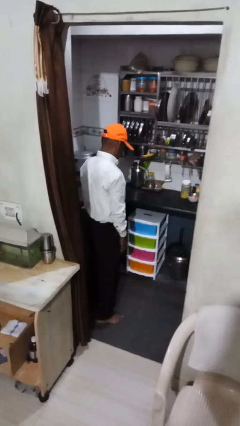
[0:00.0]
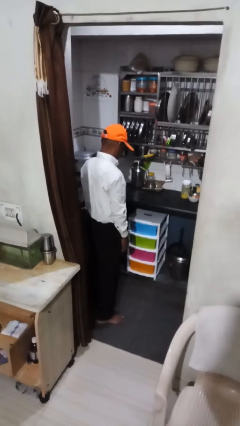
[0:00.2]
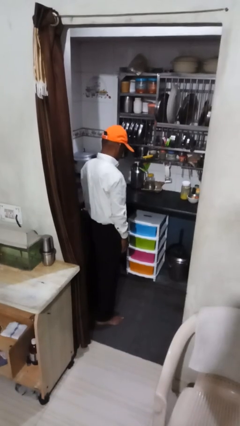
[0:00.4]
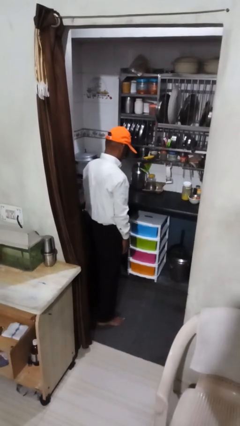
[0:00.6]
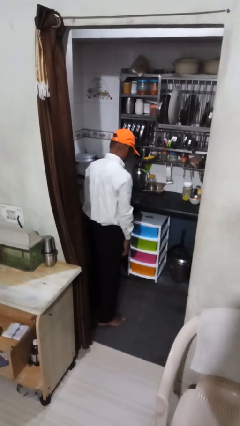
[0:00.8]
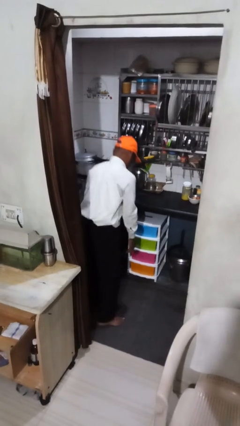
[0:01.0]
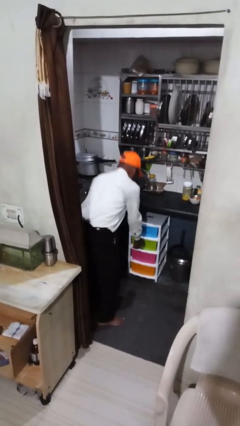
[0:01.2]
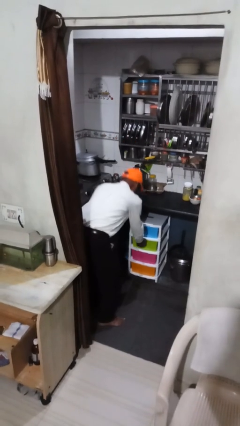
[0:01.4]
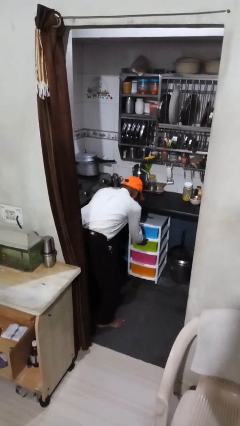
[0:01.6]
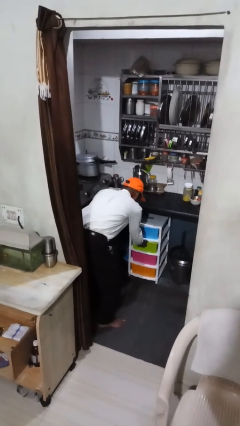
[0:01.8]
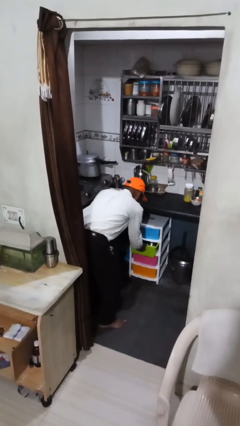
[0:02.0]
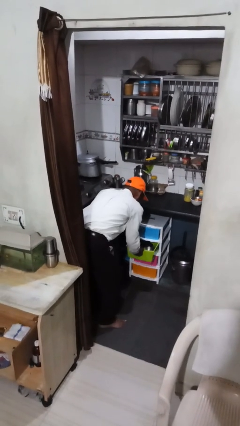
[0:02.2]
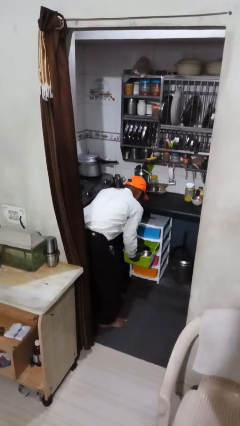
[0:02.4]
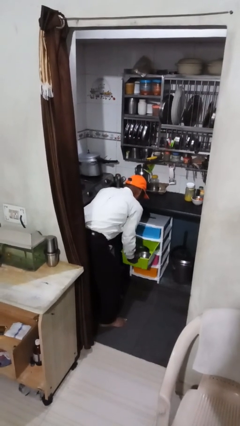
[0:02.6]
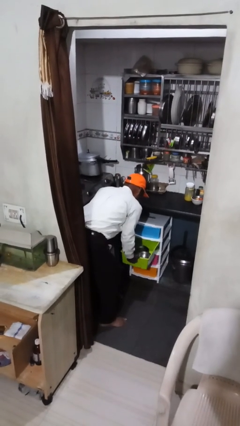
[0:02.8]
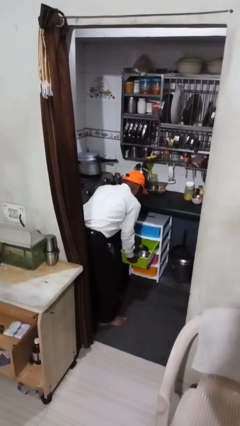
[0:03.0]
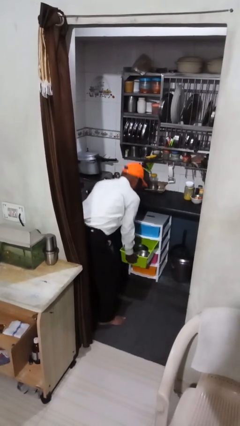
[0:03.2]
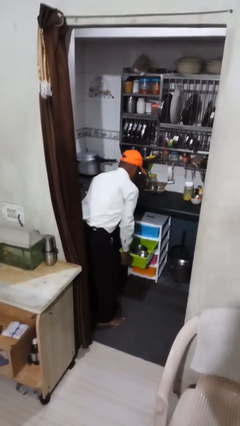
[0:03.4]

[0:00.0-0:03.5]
person opens kitchen drawer

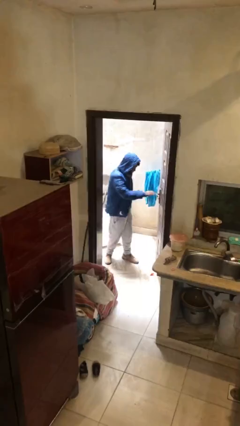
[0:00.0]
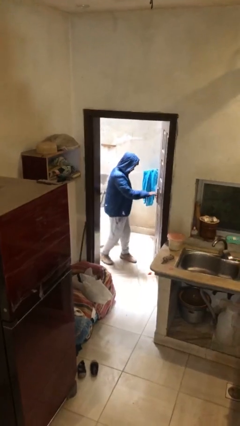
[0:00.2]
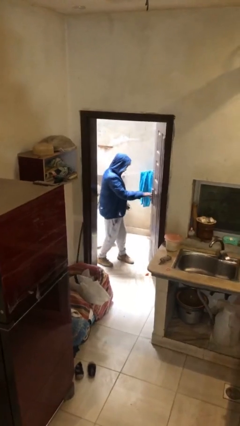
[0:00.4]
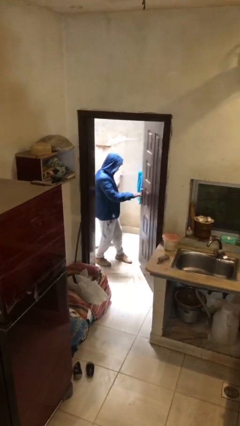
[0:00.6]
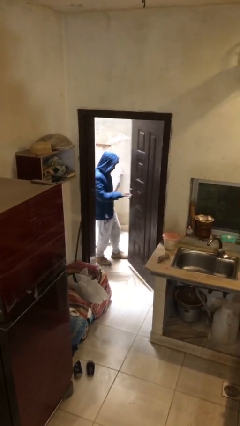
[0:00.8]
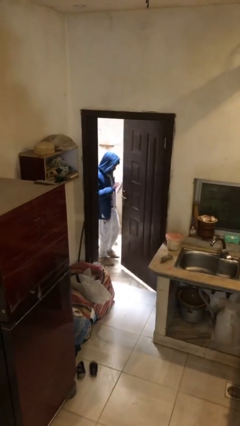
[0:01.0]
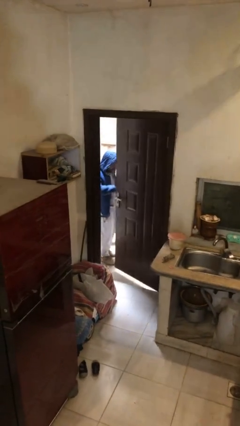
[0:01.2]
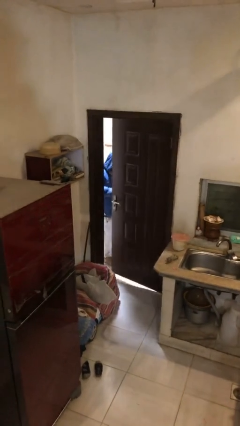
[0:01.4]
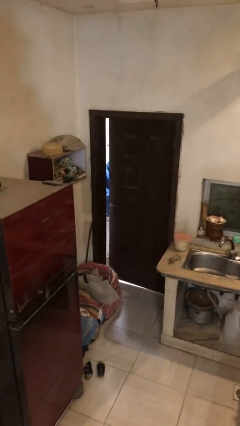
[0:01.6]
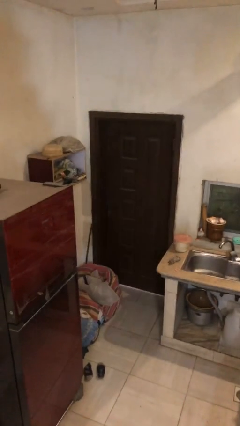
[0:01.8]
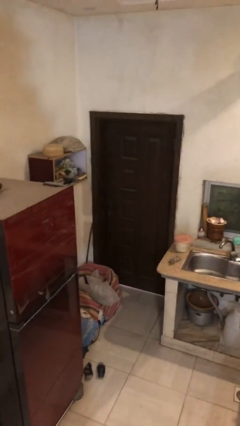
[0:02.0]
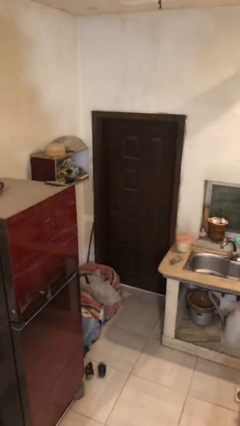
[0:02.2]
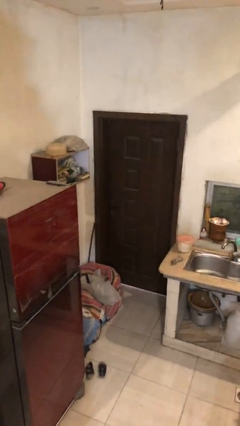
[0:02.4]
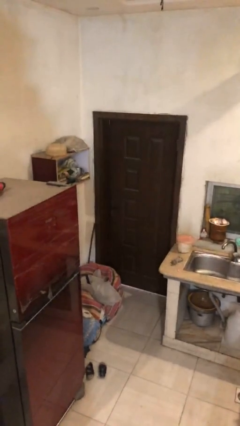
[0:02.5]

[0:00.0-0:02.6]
person closes facility door

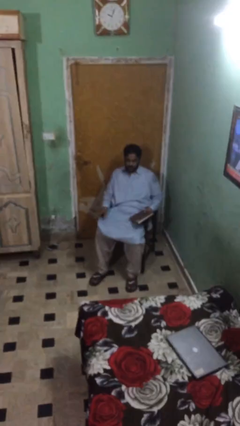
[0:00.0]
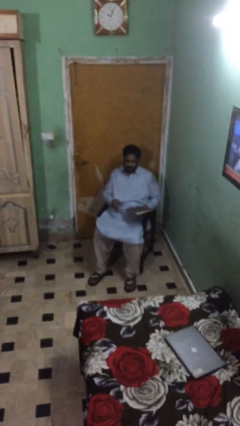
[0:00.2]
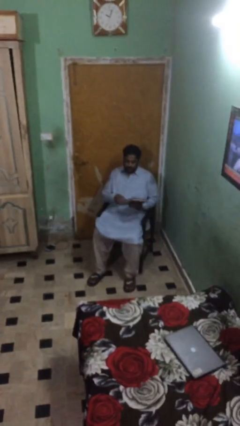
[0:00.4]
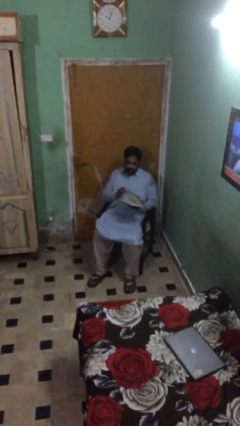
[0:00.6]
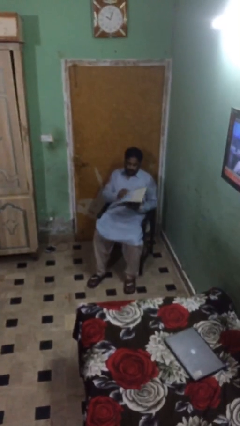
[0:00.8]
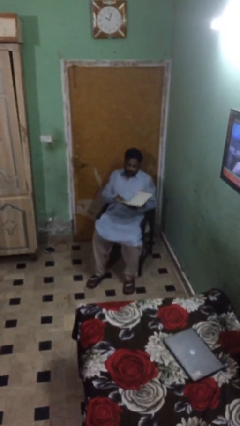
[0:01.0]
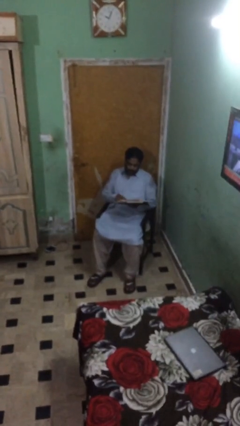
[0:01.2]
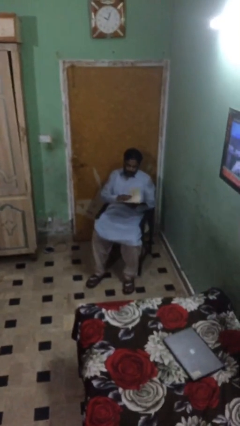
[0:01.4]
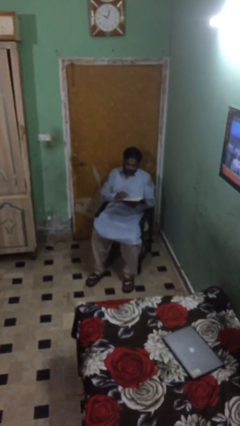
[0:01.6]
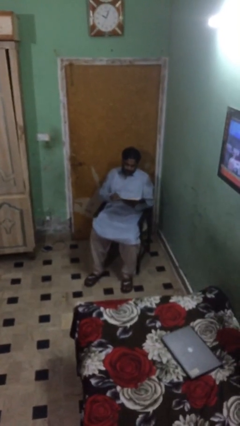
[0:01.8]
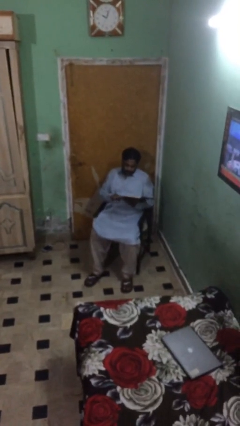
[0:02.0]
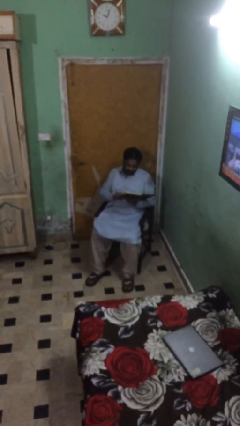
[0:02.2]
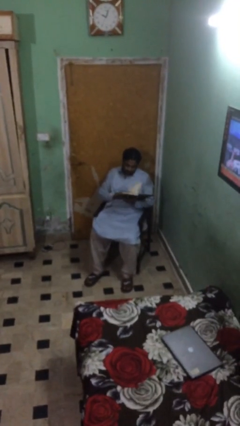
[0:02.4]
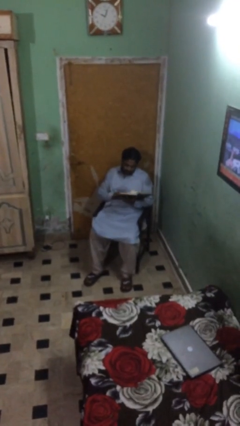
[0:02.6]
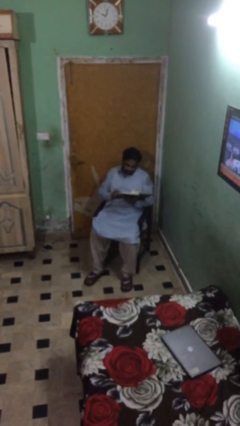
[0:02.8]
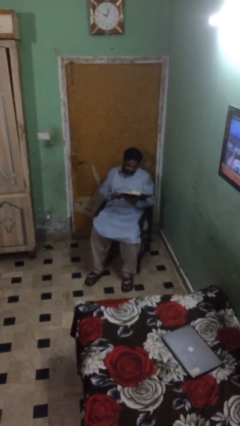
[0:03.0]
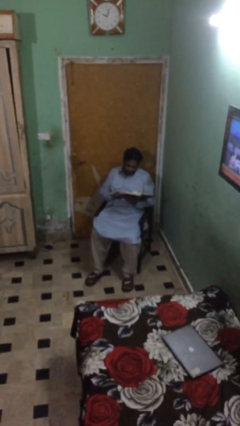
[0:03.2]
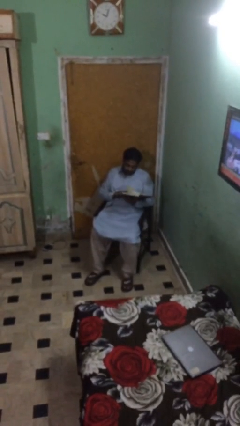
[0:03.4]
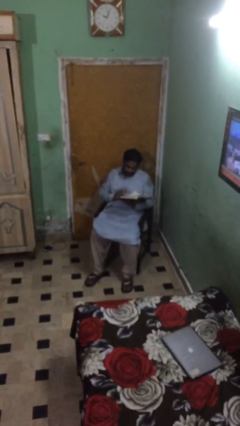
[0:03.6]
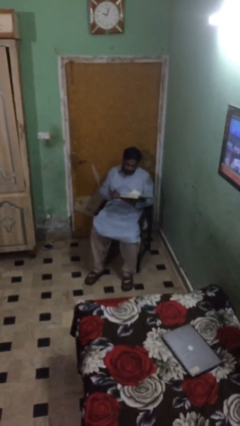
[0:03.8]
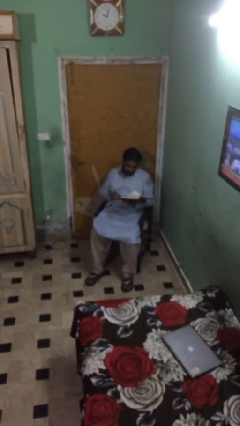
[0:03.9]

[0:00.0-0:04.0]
person reads document

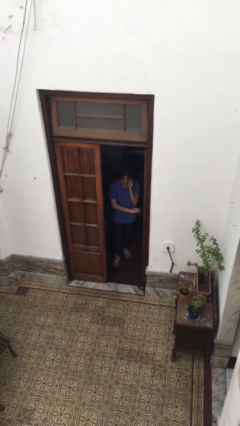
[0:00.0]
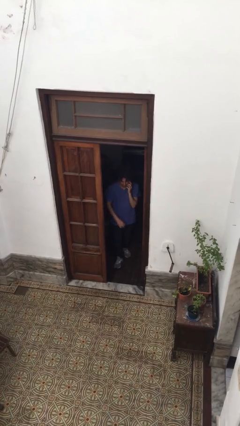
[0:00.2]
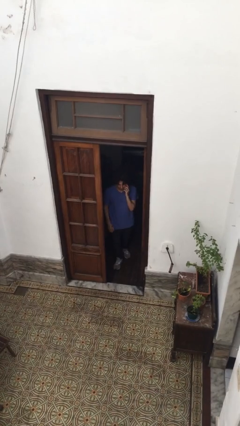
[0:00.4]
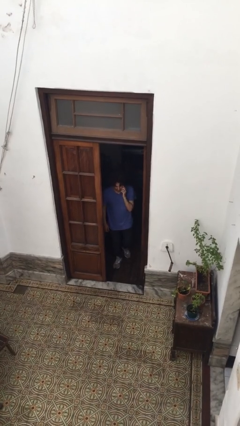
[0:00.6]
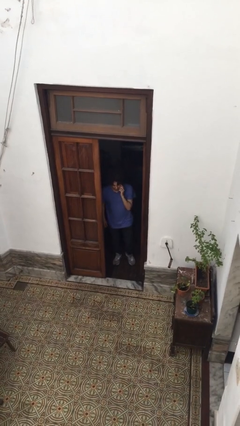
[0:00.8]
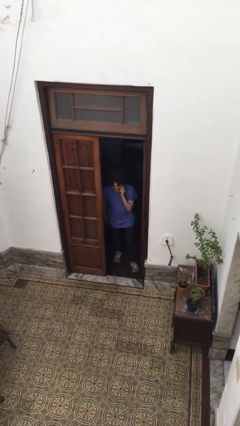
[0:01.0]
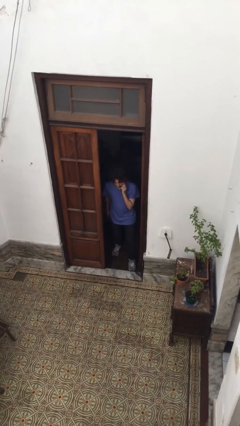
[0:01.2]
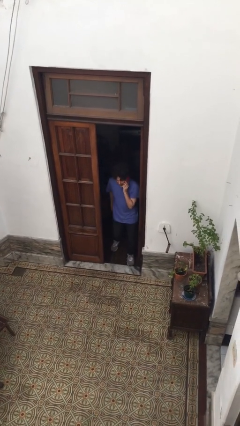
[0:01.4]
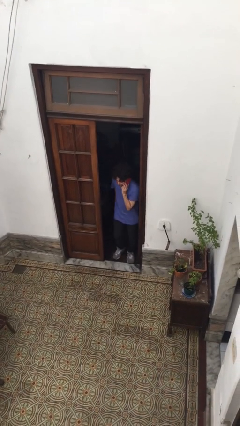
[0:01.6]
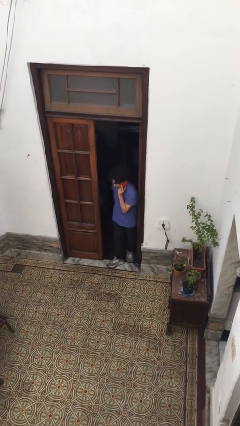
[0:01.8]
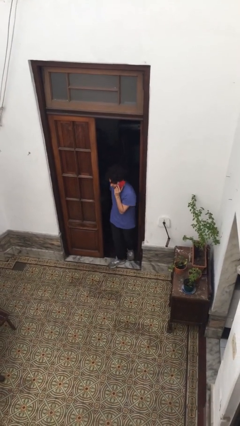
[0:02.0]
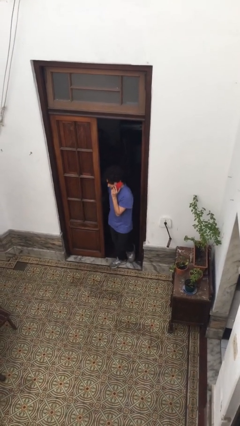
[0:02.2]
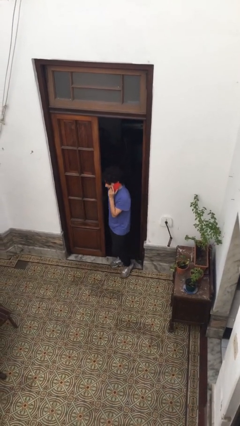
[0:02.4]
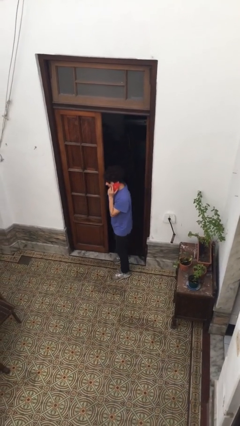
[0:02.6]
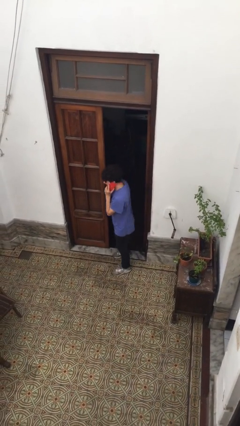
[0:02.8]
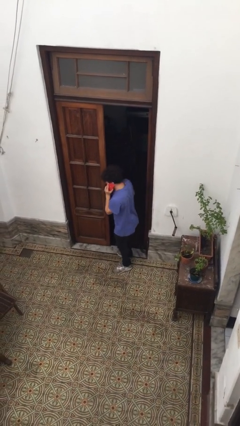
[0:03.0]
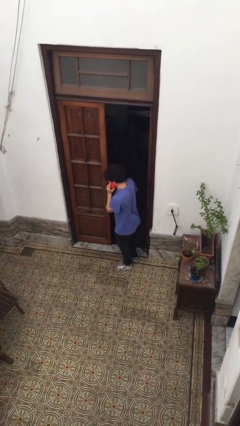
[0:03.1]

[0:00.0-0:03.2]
person enters scene through structure

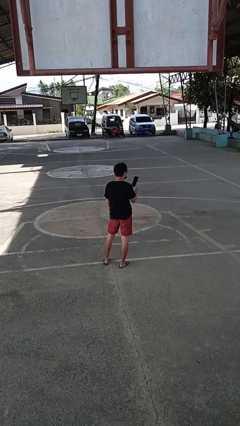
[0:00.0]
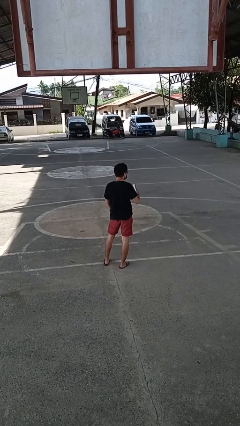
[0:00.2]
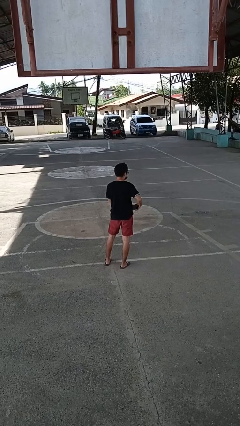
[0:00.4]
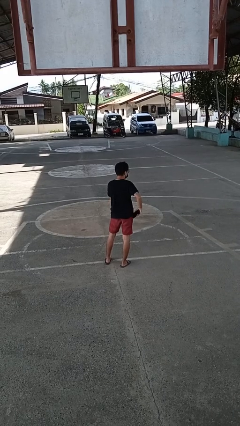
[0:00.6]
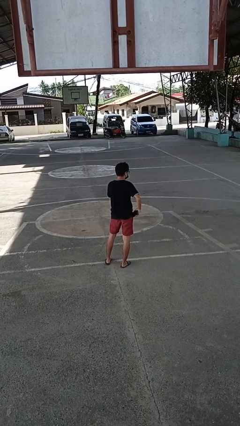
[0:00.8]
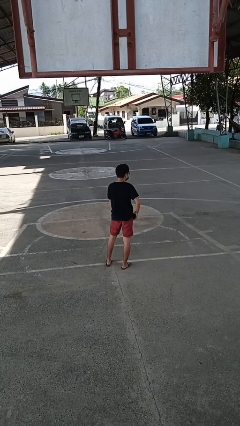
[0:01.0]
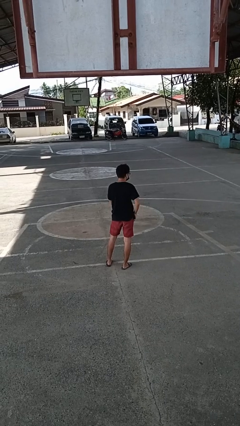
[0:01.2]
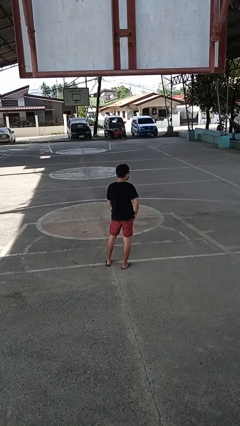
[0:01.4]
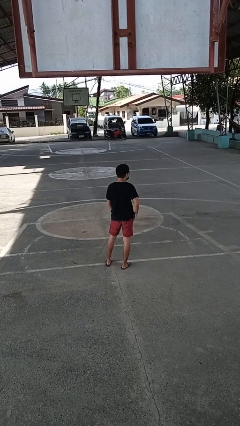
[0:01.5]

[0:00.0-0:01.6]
person puts phone into pocket

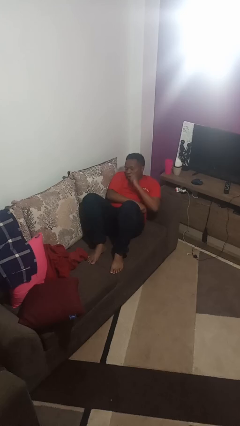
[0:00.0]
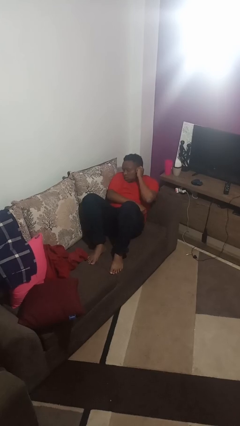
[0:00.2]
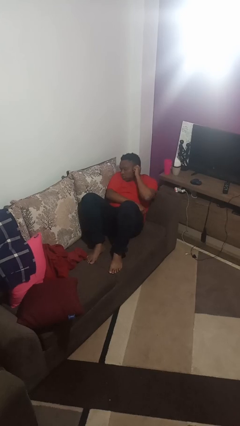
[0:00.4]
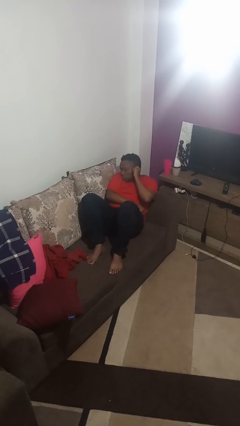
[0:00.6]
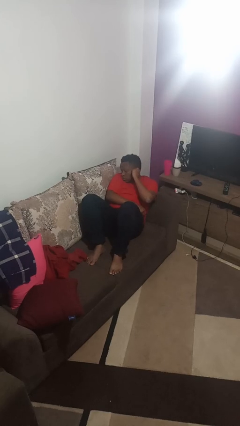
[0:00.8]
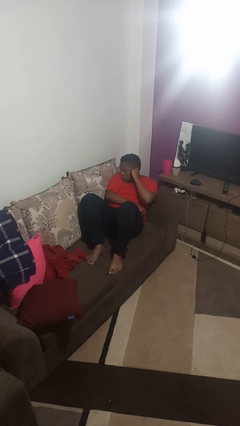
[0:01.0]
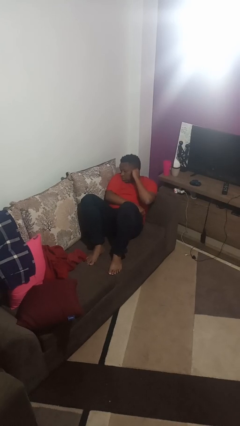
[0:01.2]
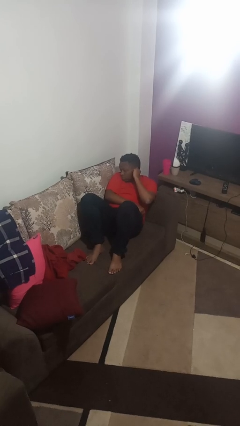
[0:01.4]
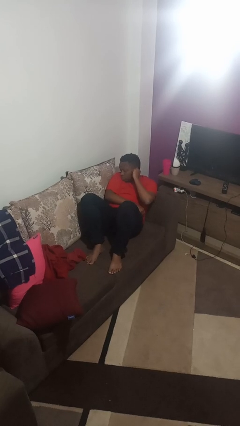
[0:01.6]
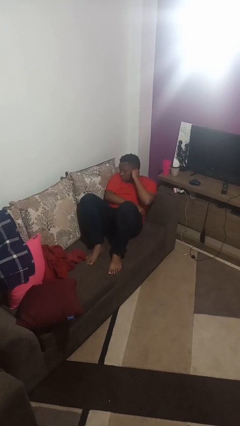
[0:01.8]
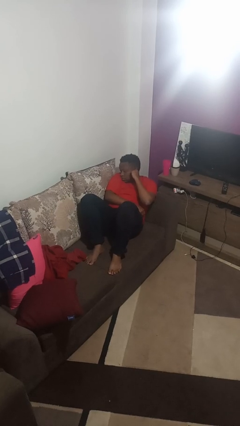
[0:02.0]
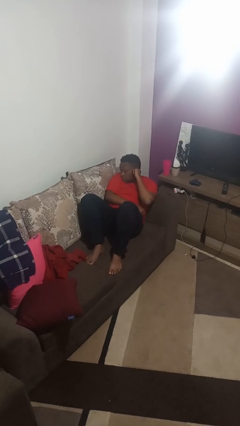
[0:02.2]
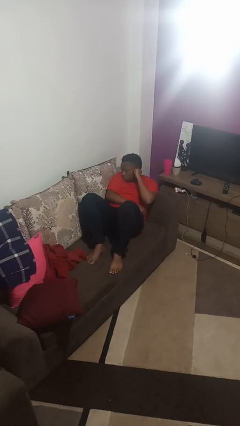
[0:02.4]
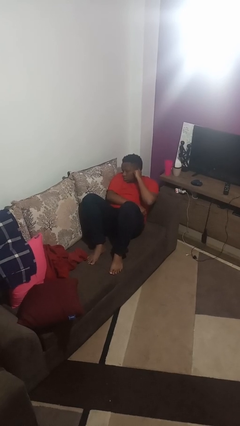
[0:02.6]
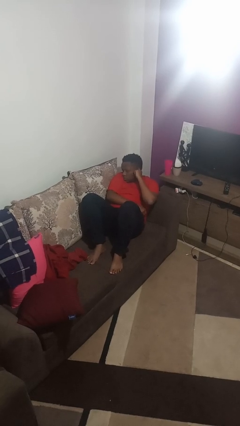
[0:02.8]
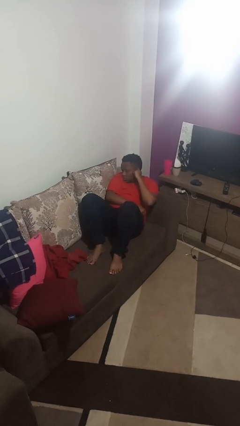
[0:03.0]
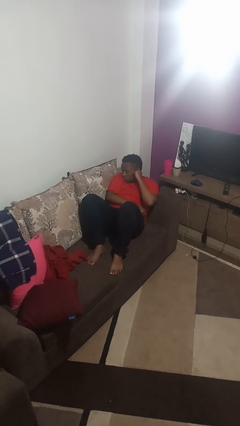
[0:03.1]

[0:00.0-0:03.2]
person touches earlobe
